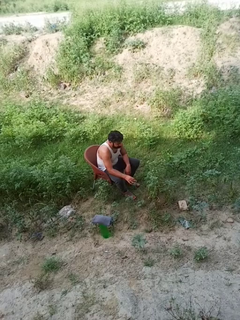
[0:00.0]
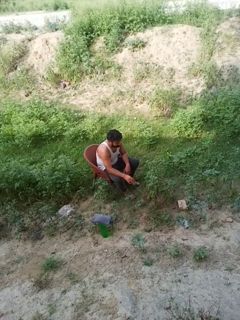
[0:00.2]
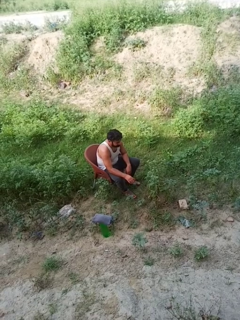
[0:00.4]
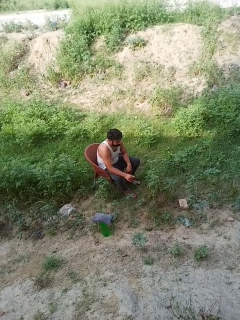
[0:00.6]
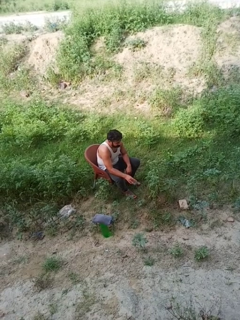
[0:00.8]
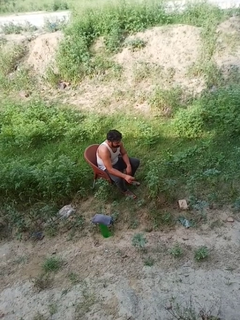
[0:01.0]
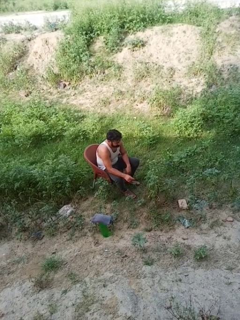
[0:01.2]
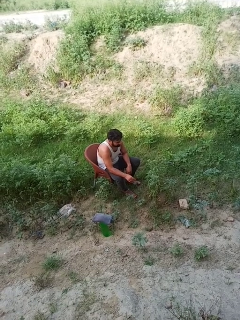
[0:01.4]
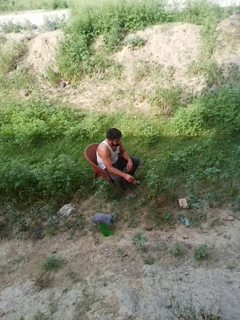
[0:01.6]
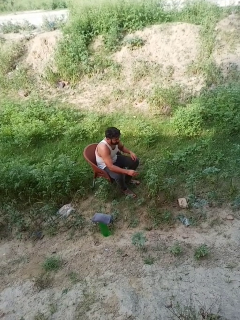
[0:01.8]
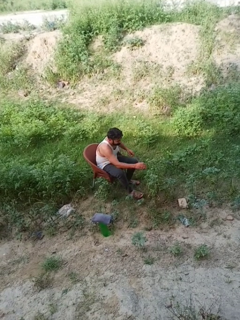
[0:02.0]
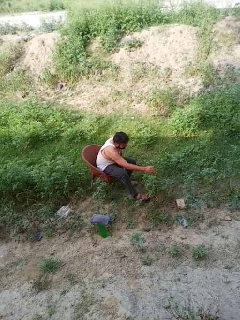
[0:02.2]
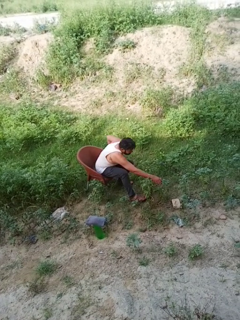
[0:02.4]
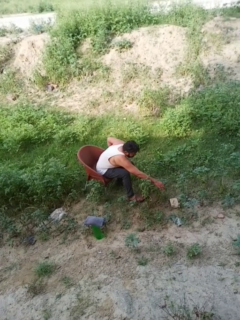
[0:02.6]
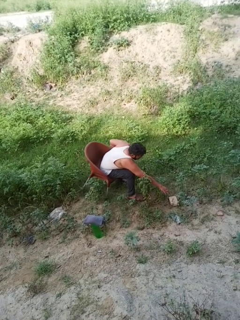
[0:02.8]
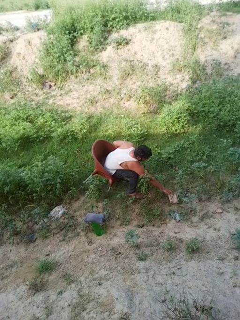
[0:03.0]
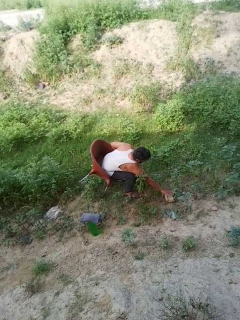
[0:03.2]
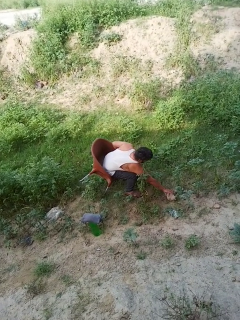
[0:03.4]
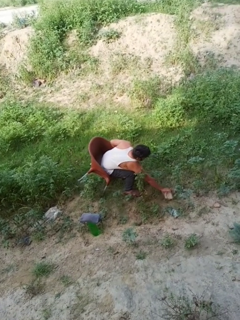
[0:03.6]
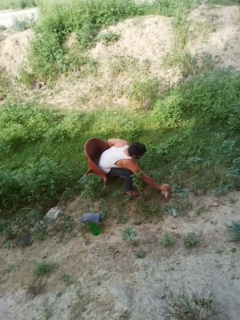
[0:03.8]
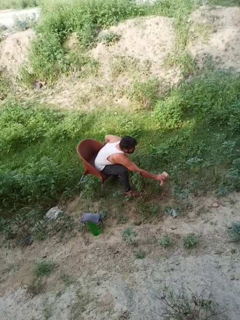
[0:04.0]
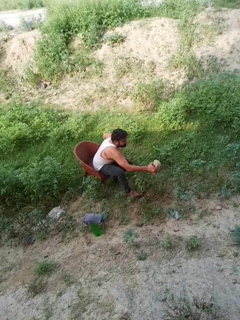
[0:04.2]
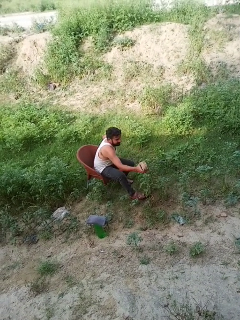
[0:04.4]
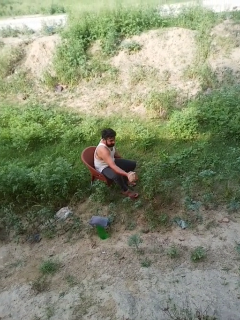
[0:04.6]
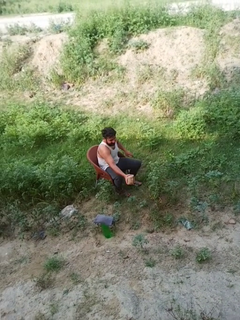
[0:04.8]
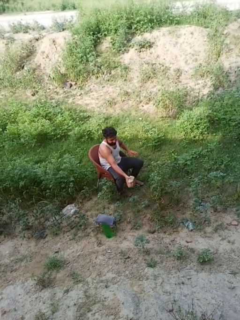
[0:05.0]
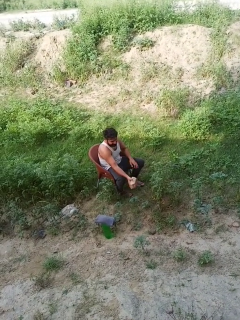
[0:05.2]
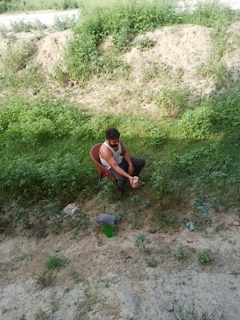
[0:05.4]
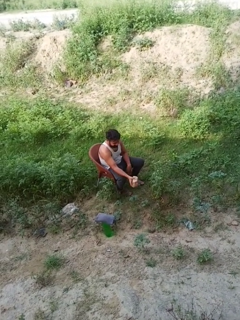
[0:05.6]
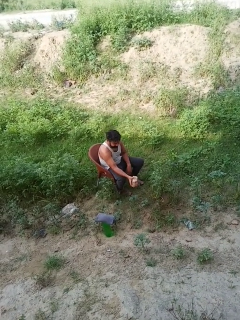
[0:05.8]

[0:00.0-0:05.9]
person picks up object from floor

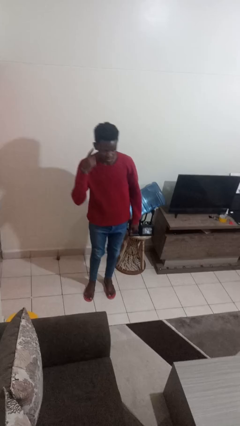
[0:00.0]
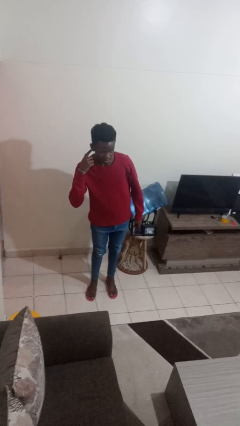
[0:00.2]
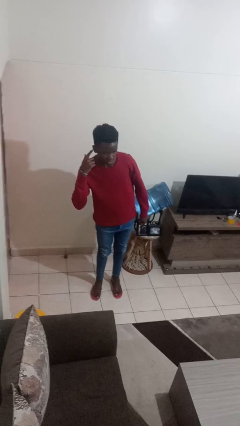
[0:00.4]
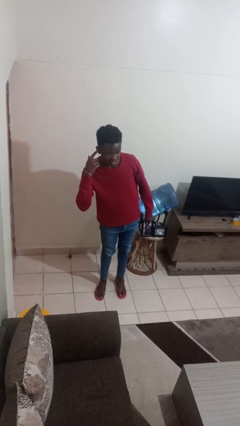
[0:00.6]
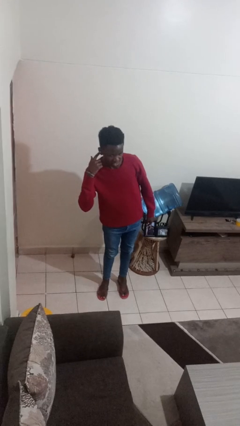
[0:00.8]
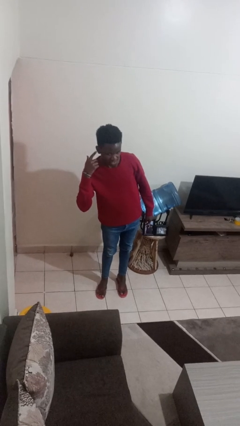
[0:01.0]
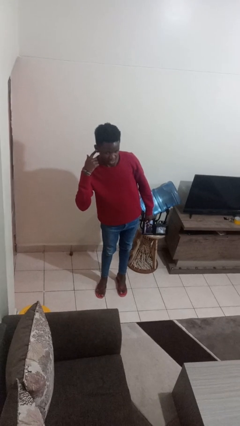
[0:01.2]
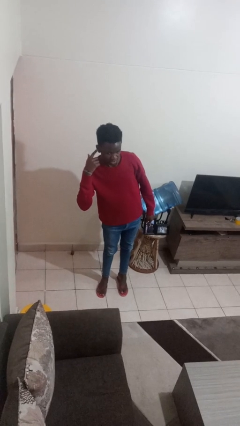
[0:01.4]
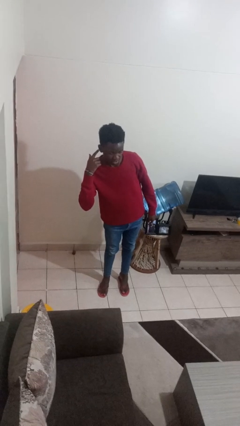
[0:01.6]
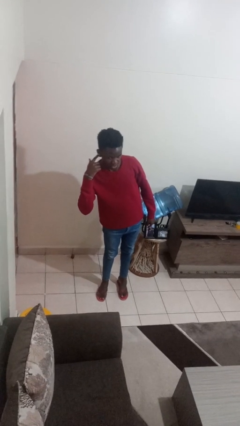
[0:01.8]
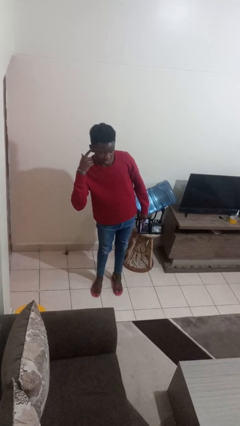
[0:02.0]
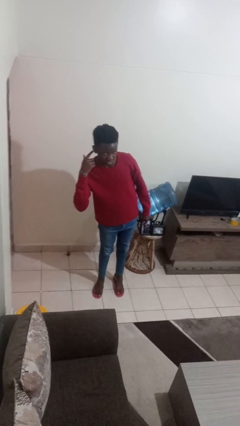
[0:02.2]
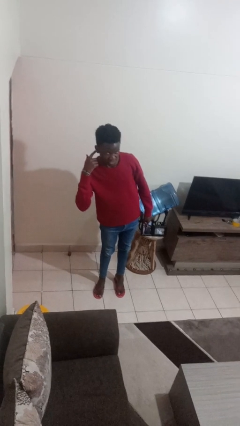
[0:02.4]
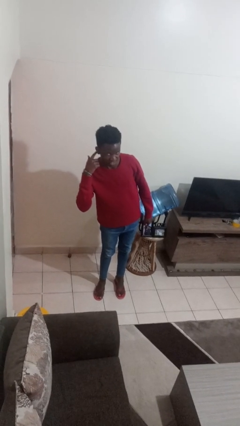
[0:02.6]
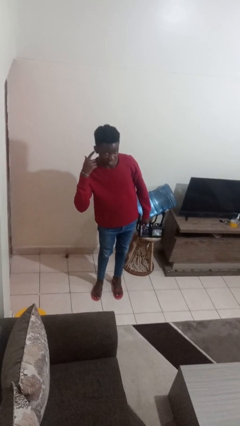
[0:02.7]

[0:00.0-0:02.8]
person gestures listen closely

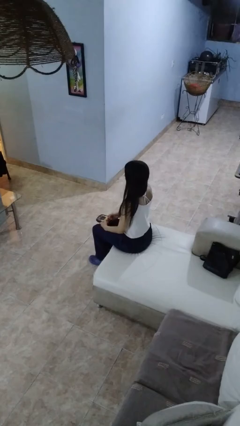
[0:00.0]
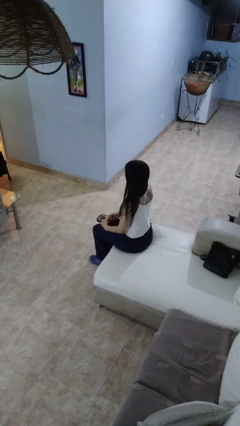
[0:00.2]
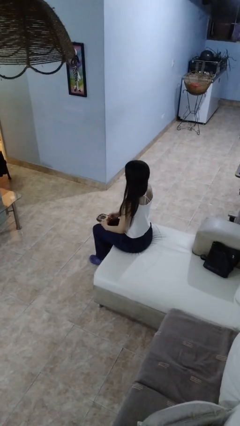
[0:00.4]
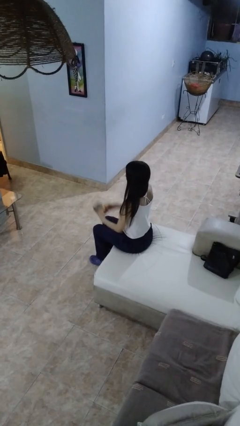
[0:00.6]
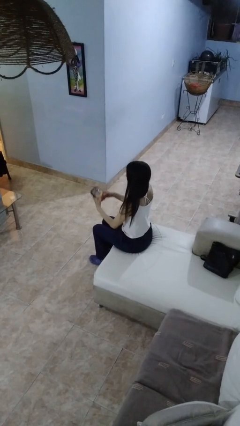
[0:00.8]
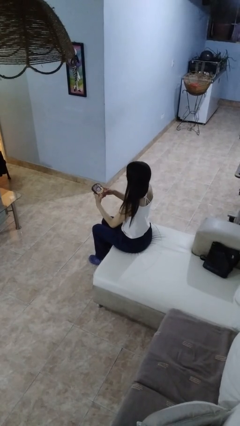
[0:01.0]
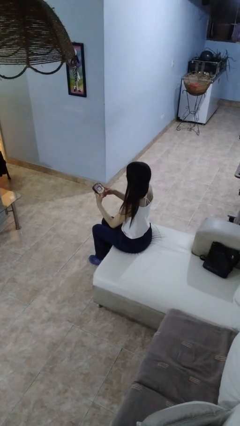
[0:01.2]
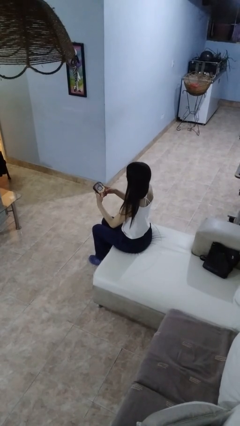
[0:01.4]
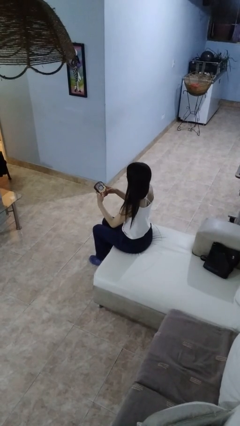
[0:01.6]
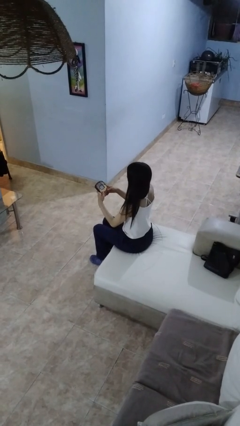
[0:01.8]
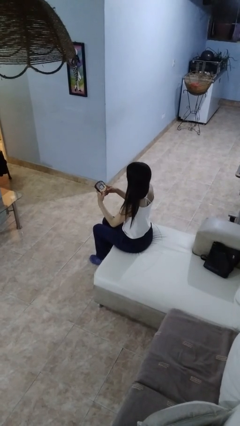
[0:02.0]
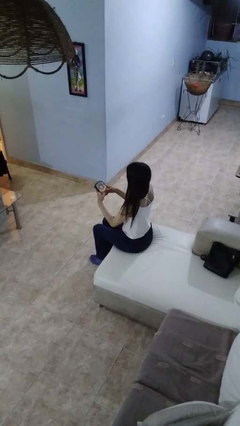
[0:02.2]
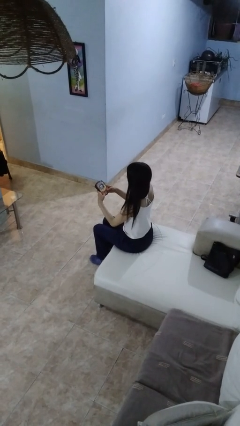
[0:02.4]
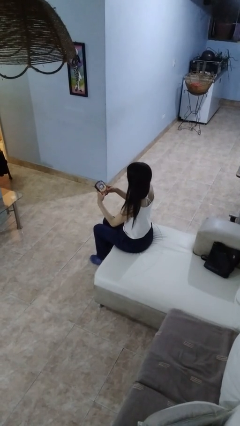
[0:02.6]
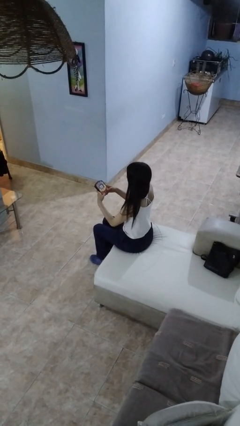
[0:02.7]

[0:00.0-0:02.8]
person interacts with handheld game

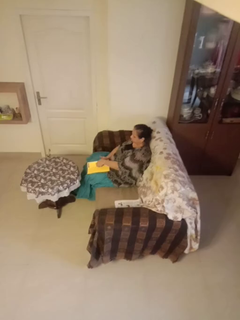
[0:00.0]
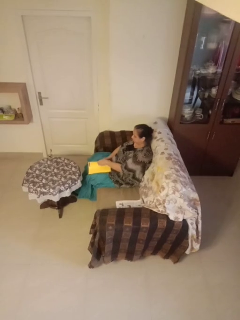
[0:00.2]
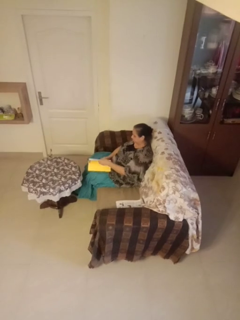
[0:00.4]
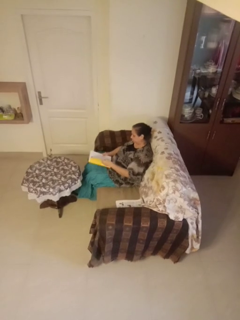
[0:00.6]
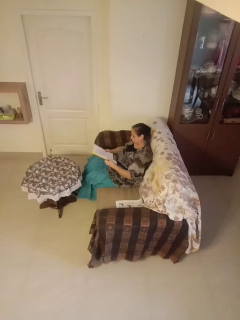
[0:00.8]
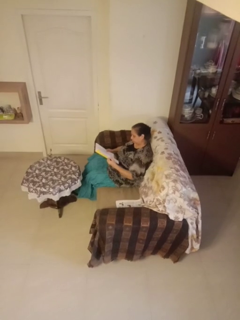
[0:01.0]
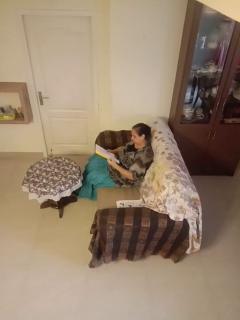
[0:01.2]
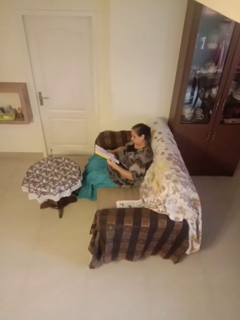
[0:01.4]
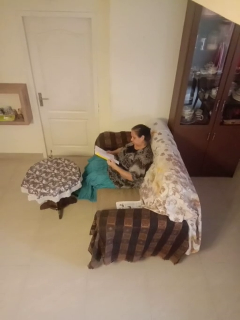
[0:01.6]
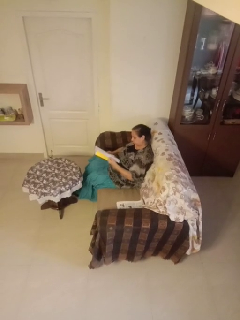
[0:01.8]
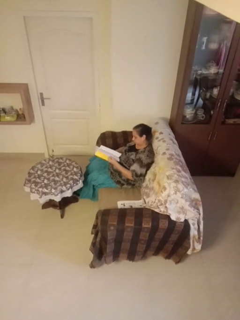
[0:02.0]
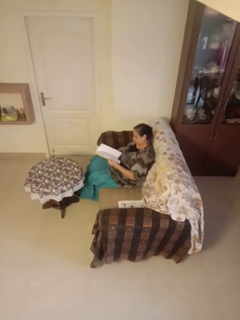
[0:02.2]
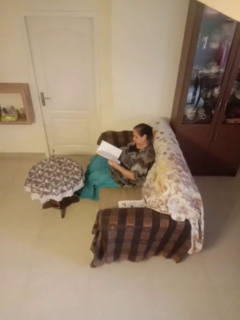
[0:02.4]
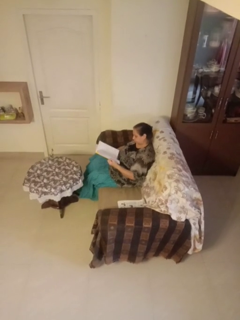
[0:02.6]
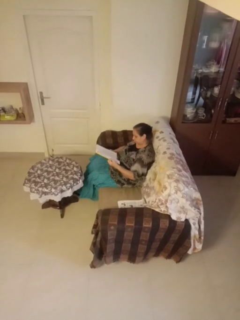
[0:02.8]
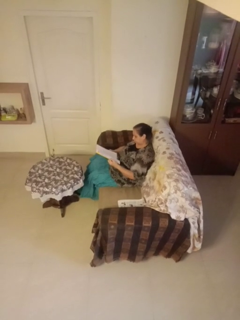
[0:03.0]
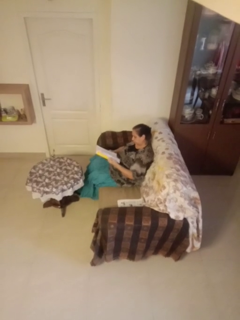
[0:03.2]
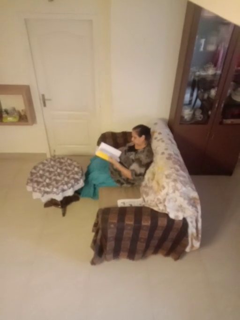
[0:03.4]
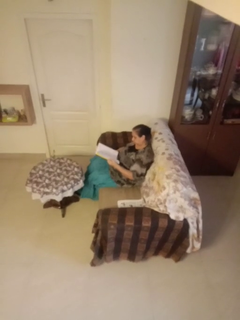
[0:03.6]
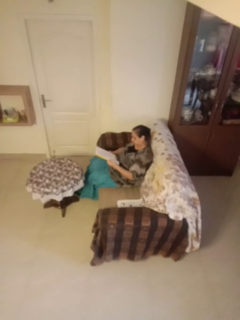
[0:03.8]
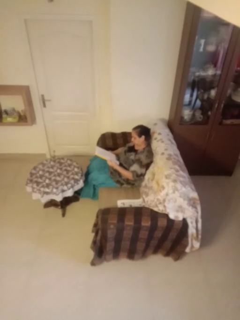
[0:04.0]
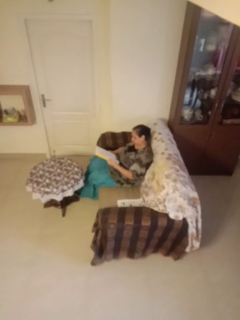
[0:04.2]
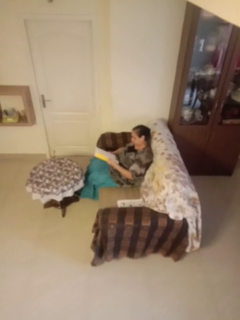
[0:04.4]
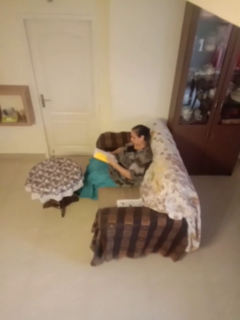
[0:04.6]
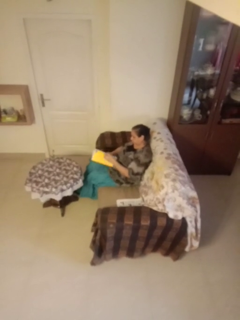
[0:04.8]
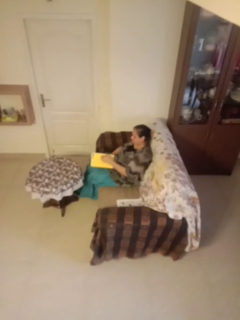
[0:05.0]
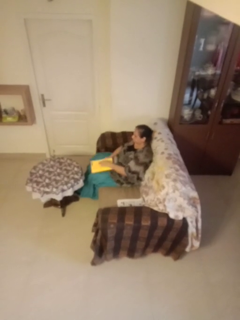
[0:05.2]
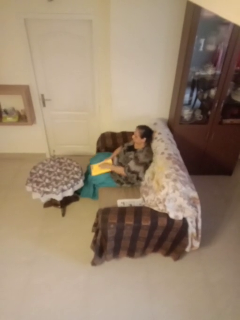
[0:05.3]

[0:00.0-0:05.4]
person reads magazine

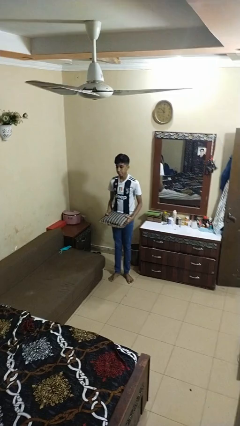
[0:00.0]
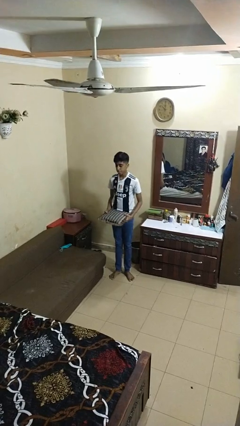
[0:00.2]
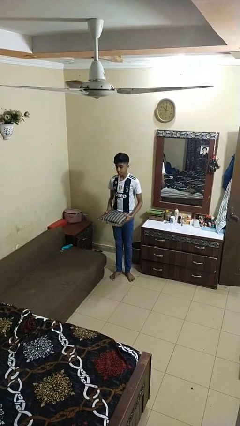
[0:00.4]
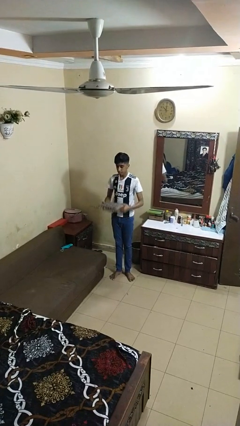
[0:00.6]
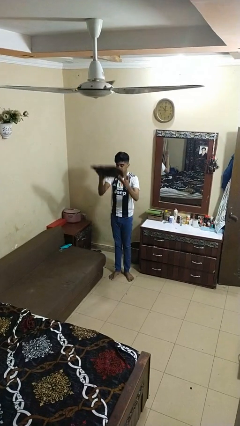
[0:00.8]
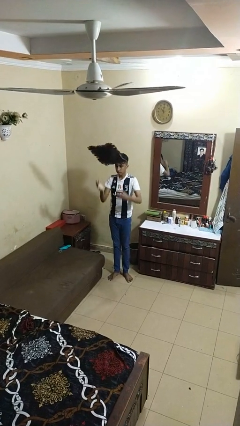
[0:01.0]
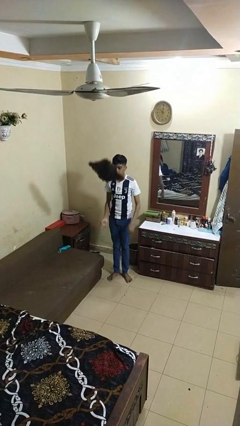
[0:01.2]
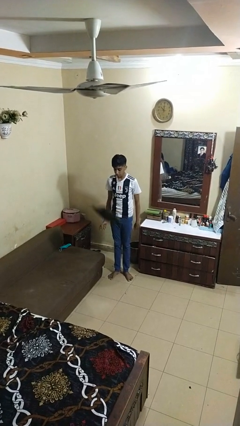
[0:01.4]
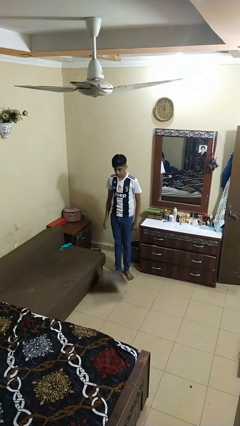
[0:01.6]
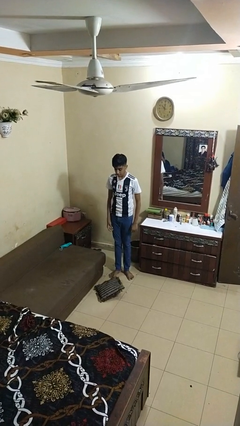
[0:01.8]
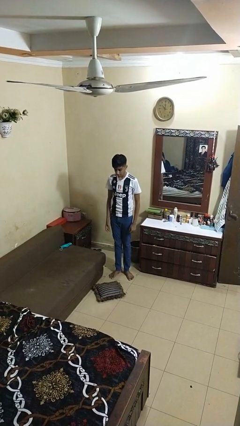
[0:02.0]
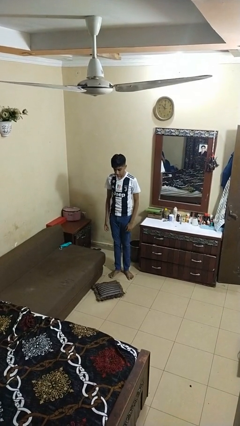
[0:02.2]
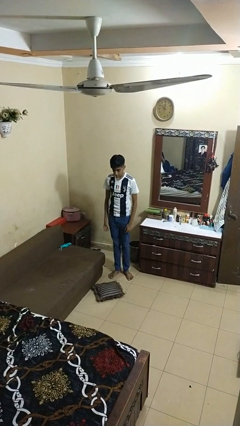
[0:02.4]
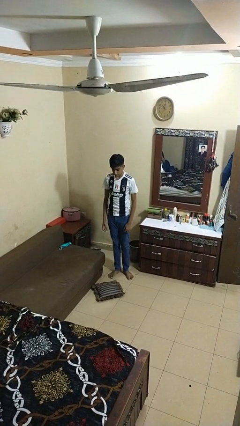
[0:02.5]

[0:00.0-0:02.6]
person throws object into air

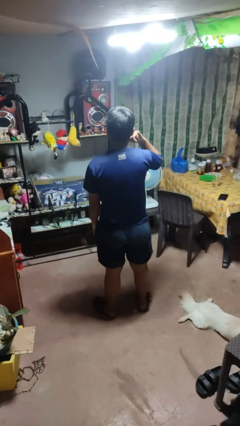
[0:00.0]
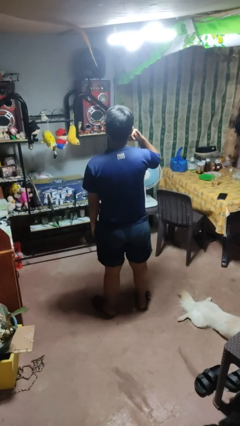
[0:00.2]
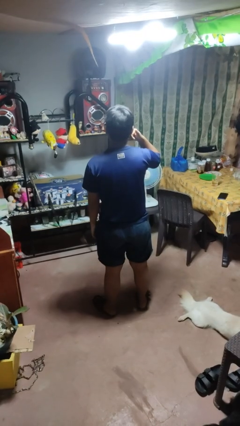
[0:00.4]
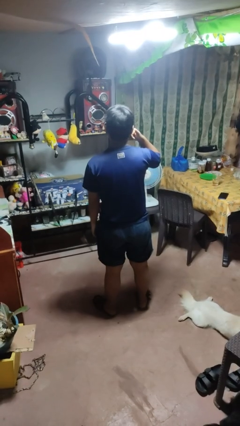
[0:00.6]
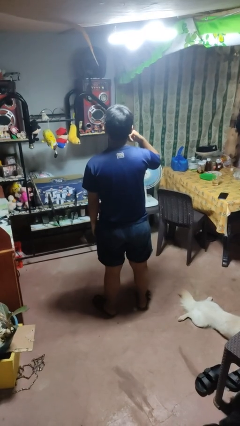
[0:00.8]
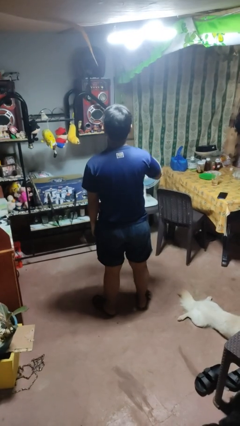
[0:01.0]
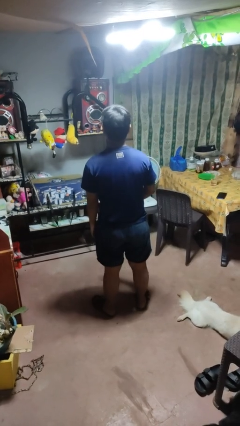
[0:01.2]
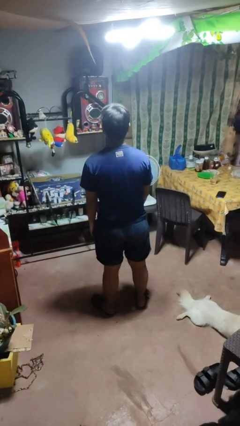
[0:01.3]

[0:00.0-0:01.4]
person gestures call me
